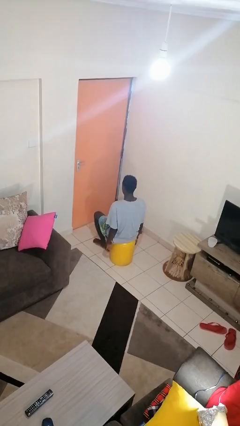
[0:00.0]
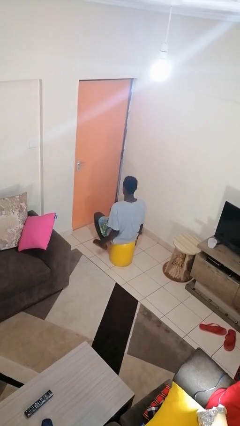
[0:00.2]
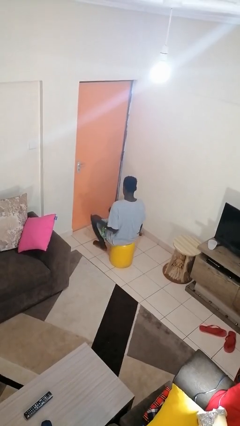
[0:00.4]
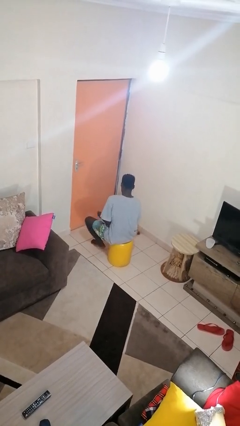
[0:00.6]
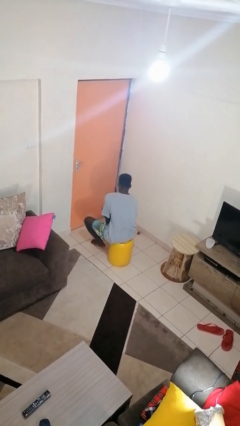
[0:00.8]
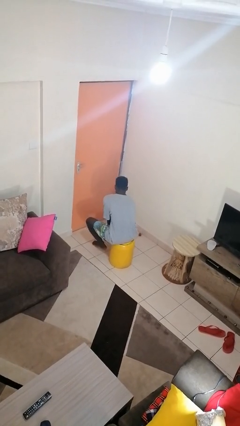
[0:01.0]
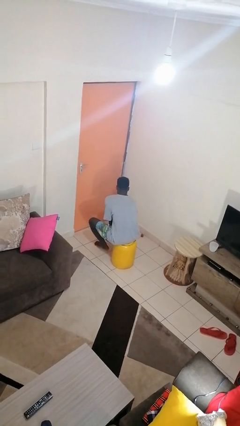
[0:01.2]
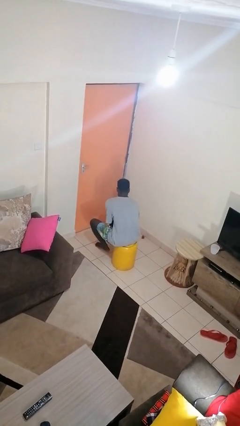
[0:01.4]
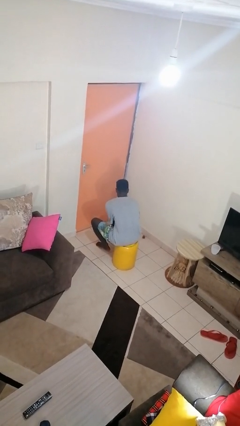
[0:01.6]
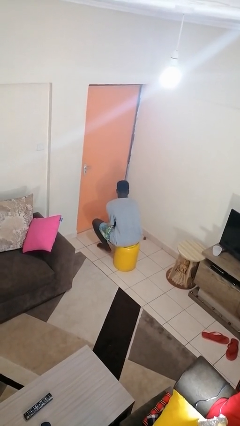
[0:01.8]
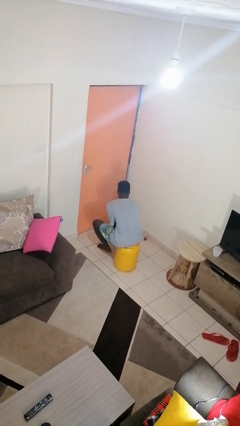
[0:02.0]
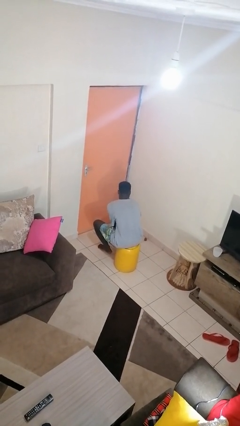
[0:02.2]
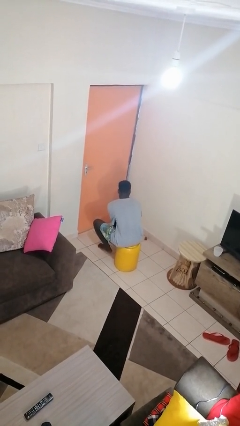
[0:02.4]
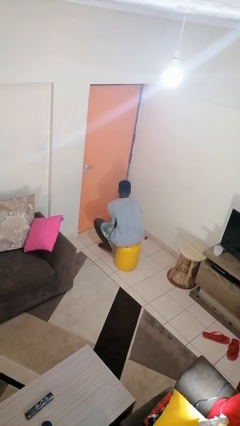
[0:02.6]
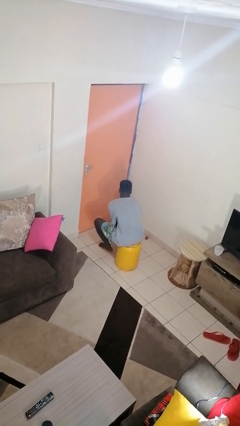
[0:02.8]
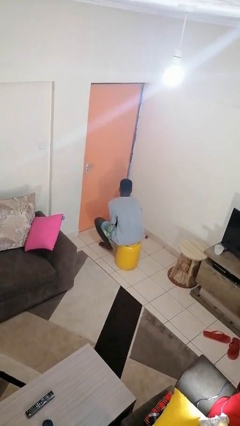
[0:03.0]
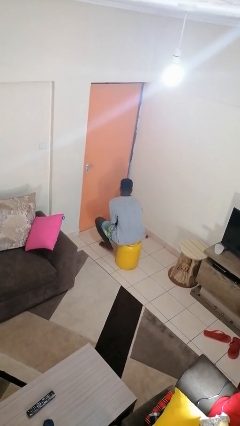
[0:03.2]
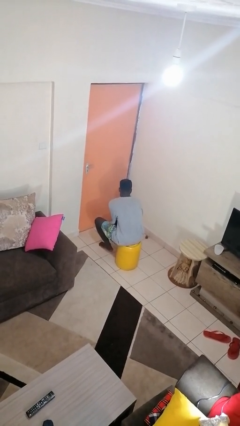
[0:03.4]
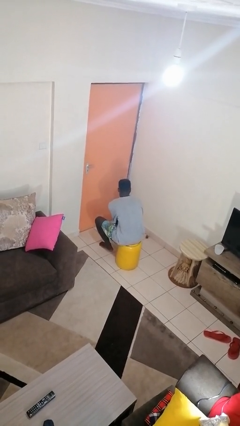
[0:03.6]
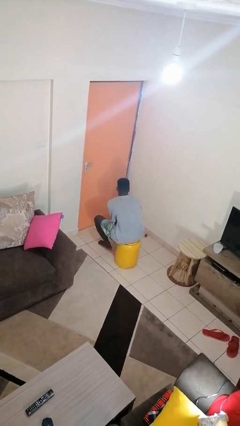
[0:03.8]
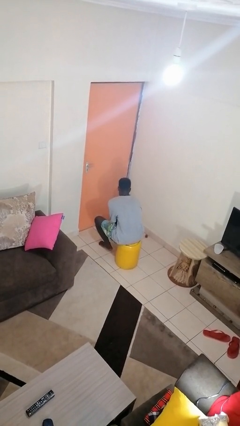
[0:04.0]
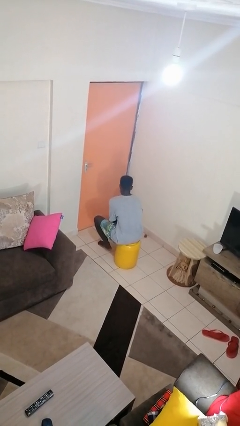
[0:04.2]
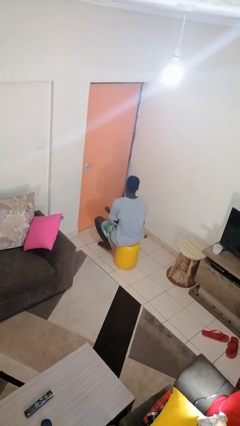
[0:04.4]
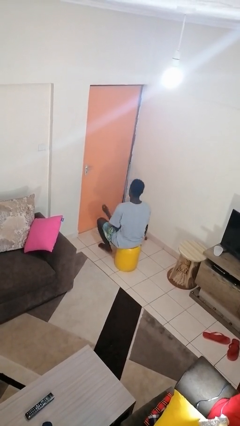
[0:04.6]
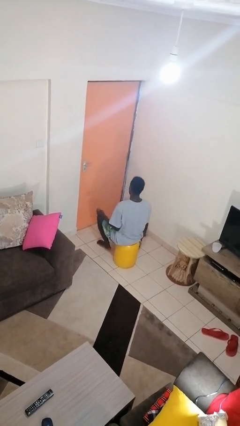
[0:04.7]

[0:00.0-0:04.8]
person rubs foot

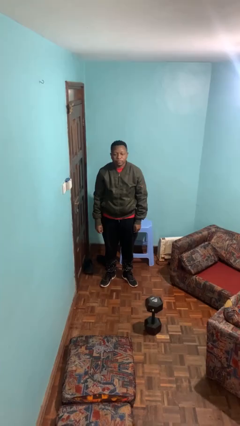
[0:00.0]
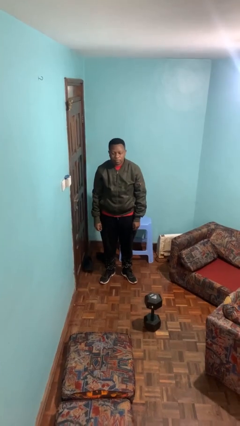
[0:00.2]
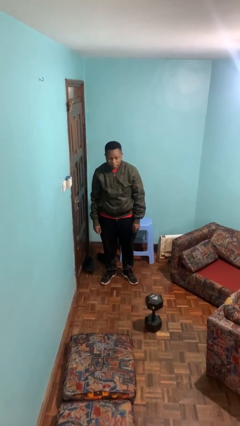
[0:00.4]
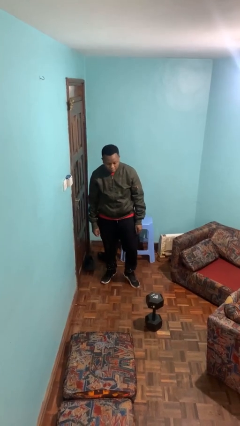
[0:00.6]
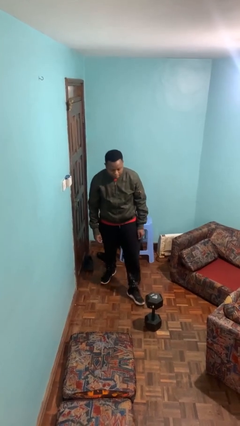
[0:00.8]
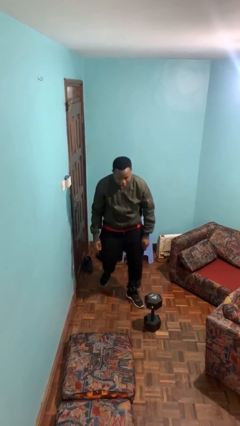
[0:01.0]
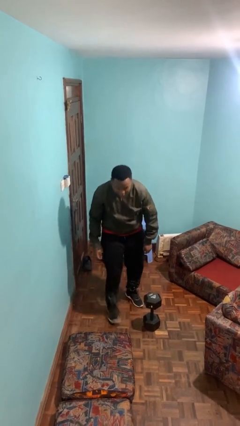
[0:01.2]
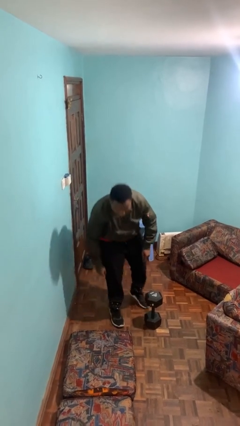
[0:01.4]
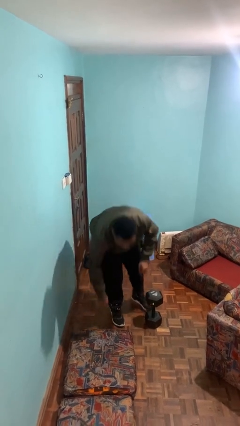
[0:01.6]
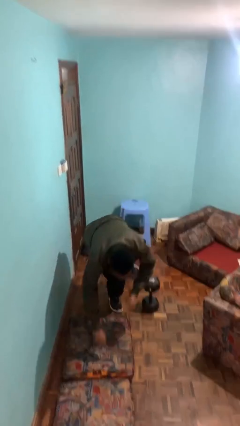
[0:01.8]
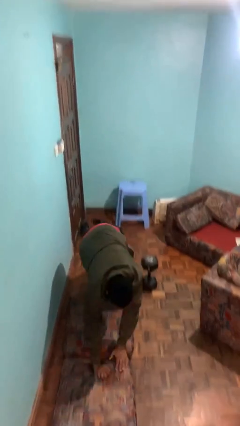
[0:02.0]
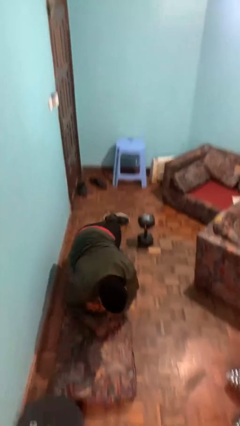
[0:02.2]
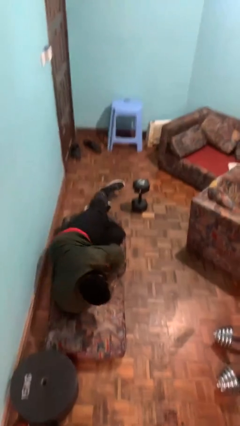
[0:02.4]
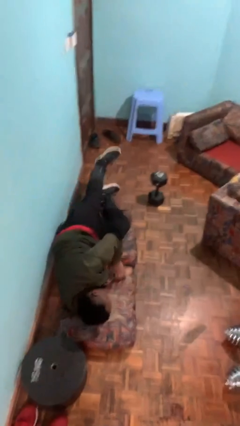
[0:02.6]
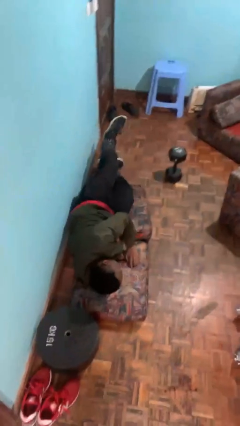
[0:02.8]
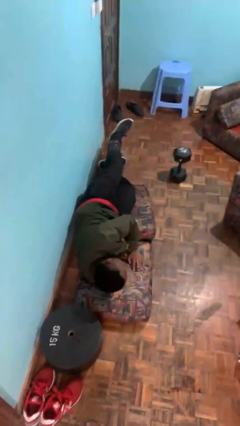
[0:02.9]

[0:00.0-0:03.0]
person trips on object on floor

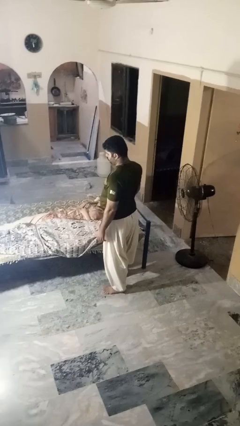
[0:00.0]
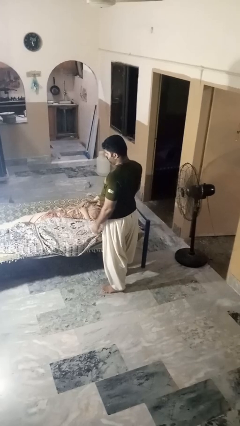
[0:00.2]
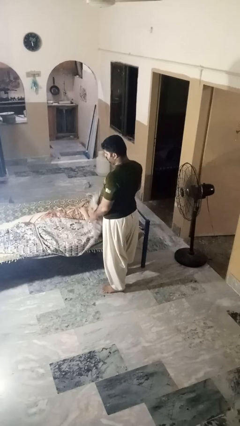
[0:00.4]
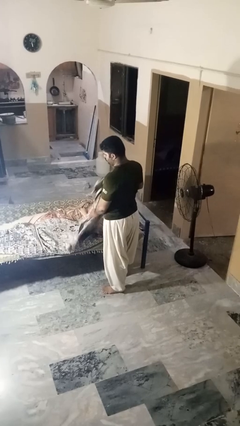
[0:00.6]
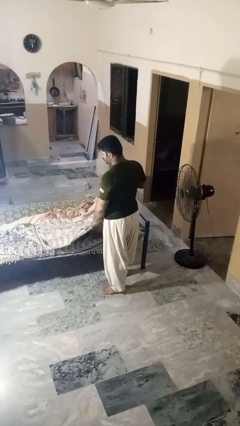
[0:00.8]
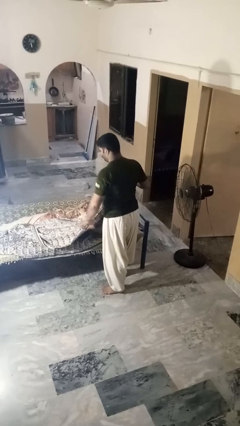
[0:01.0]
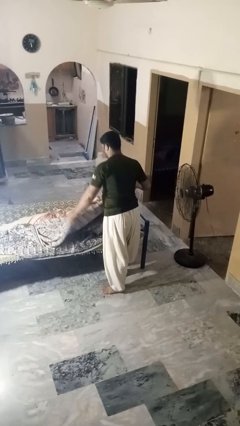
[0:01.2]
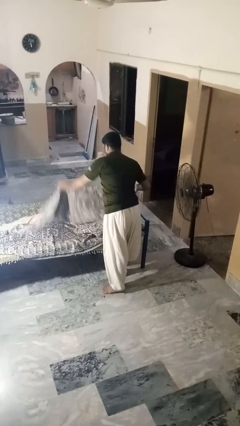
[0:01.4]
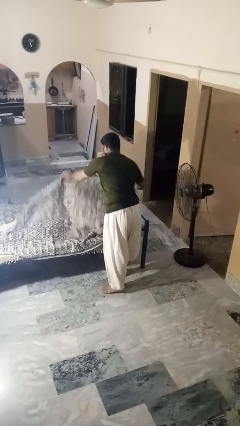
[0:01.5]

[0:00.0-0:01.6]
person covers friend with blanket

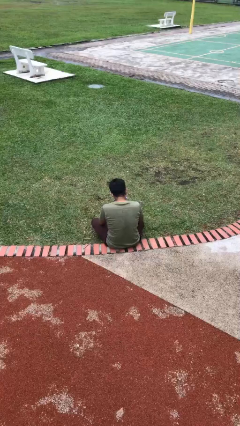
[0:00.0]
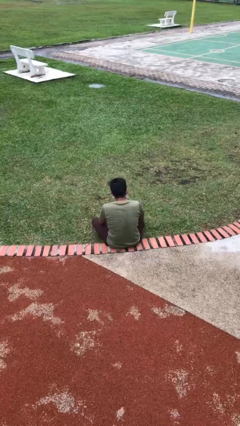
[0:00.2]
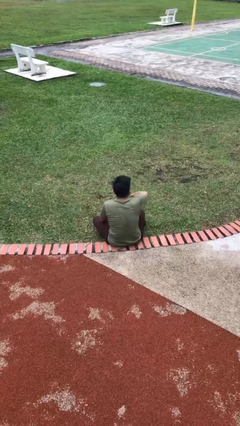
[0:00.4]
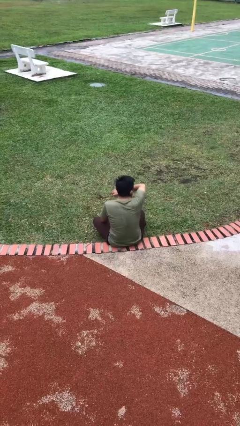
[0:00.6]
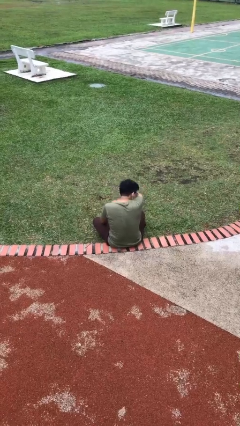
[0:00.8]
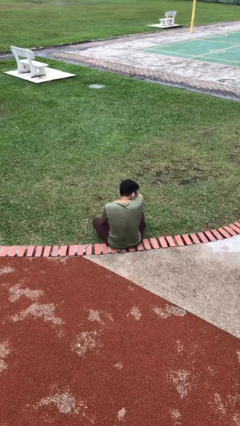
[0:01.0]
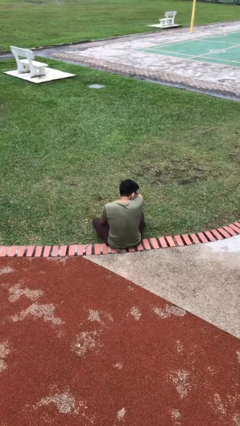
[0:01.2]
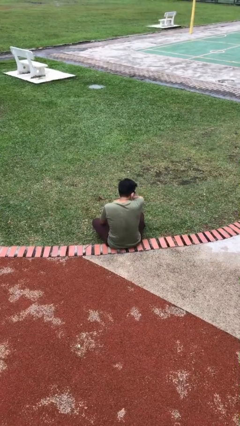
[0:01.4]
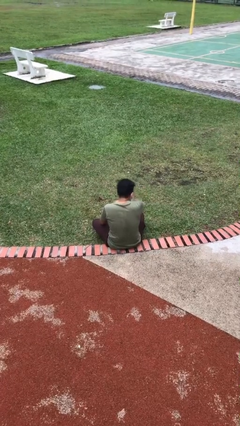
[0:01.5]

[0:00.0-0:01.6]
person sneezes into arm

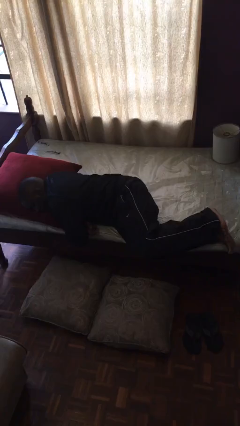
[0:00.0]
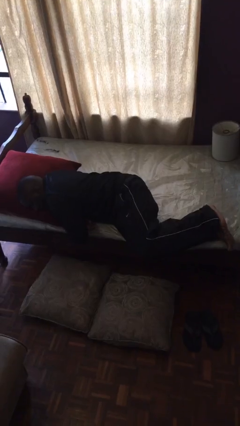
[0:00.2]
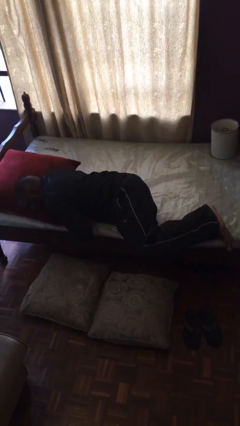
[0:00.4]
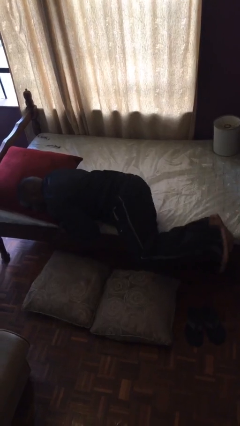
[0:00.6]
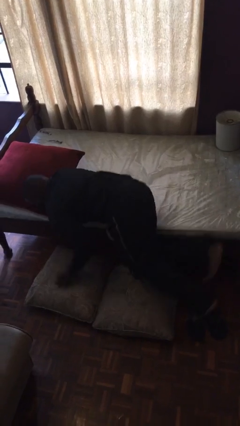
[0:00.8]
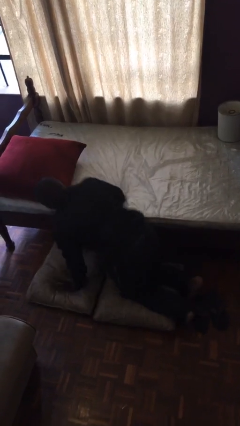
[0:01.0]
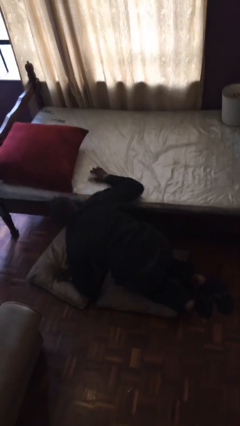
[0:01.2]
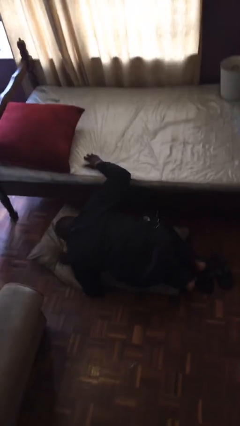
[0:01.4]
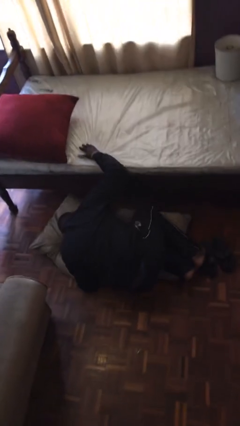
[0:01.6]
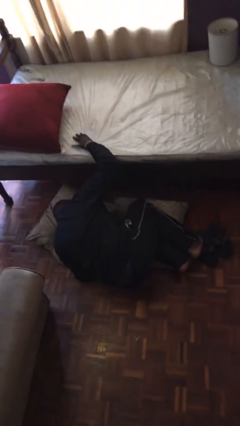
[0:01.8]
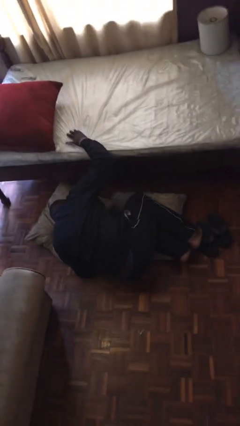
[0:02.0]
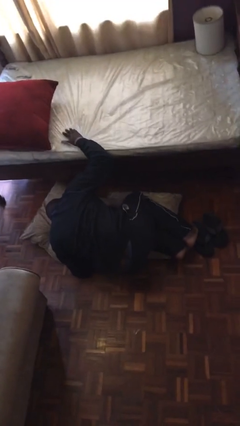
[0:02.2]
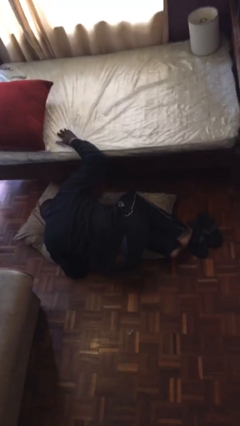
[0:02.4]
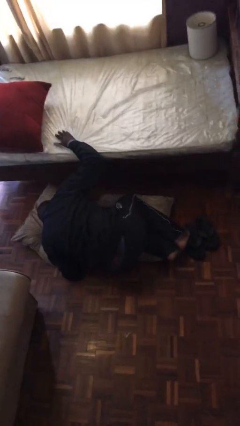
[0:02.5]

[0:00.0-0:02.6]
person falls from bed

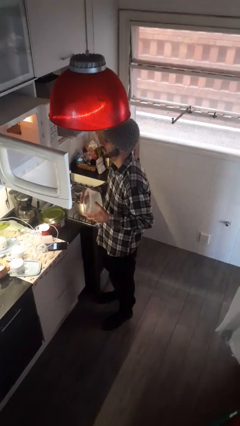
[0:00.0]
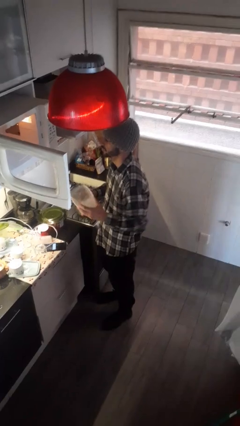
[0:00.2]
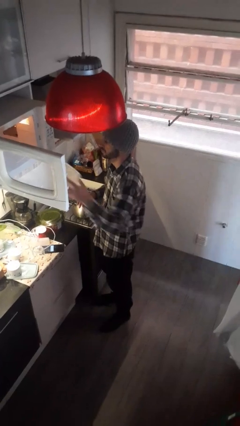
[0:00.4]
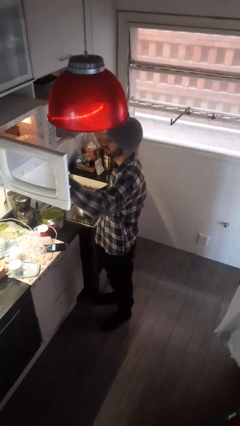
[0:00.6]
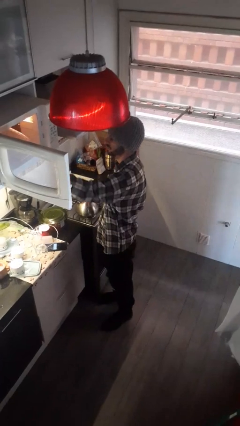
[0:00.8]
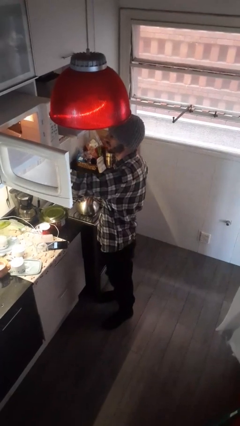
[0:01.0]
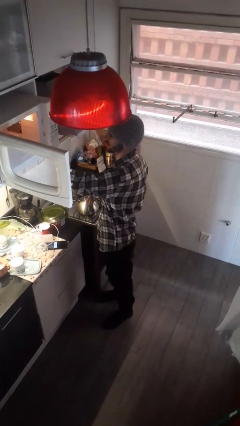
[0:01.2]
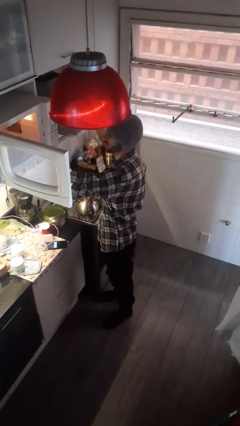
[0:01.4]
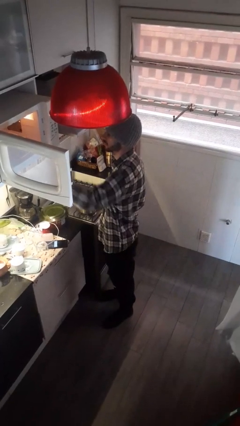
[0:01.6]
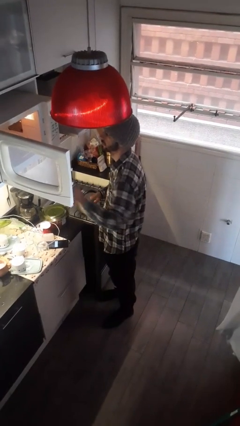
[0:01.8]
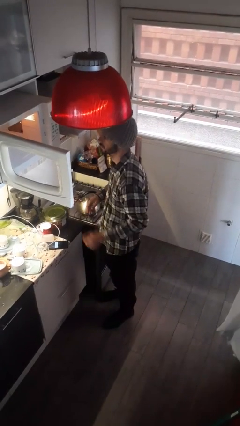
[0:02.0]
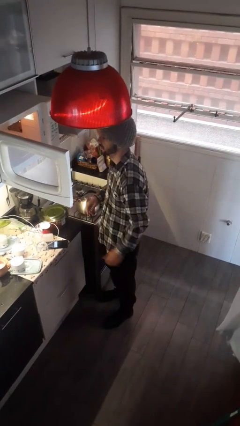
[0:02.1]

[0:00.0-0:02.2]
person puts object into microwave

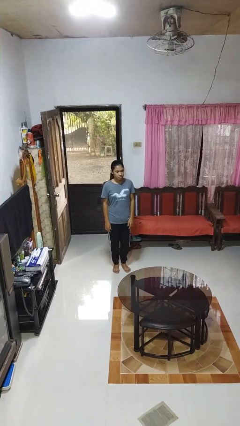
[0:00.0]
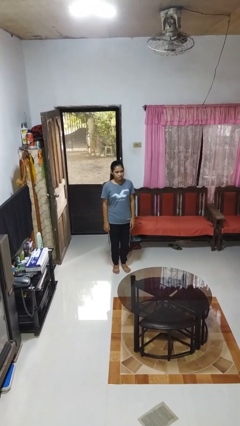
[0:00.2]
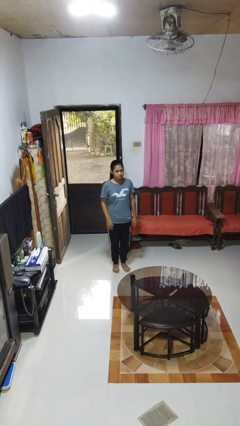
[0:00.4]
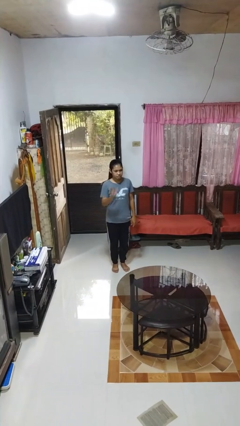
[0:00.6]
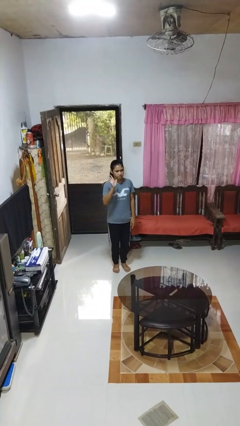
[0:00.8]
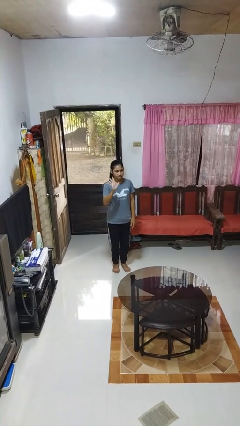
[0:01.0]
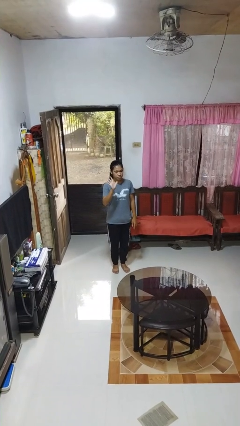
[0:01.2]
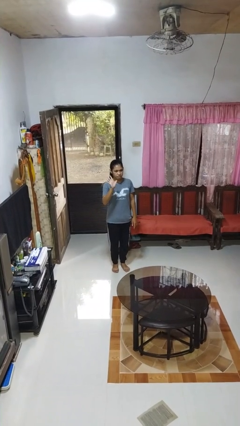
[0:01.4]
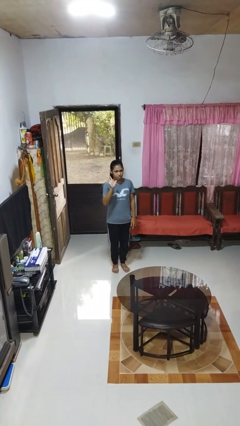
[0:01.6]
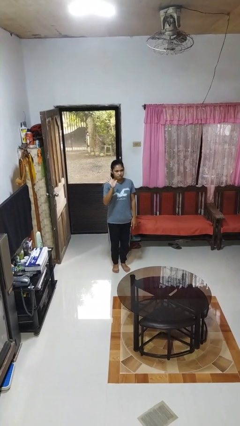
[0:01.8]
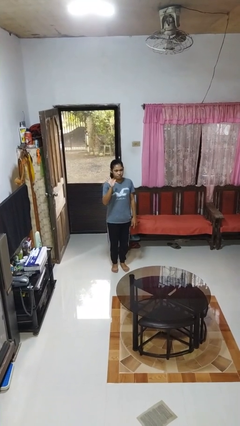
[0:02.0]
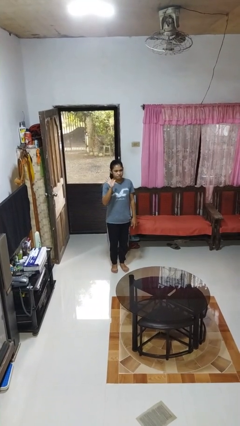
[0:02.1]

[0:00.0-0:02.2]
person gestures number five
